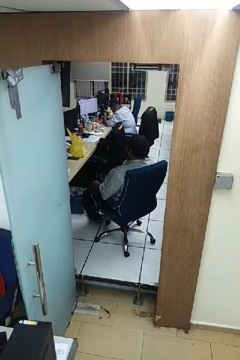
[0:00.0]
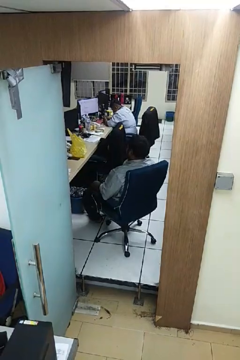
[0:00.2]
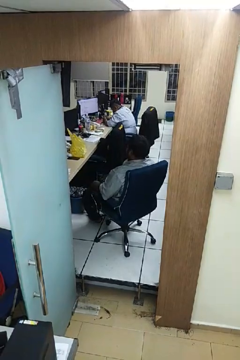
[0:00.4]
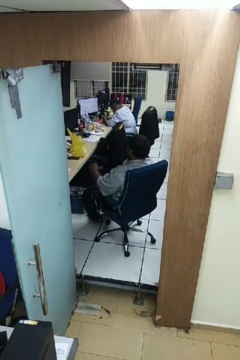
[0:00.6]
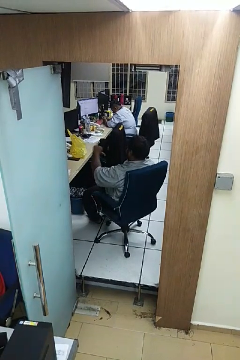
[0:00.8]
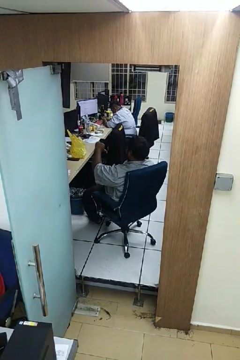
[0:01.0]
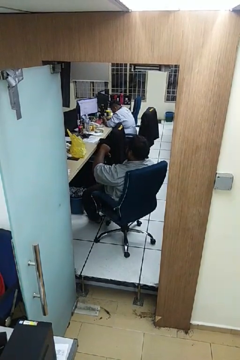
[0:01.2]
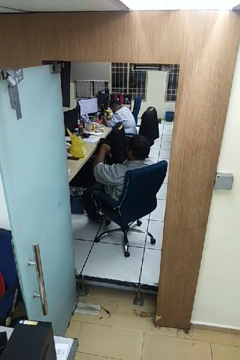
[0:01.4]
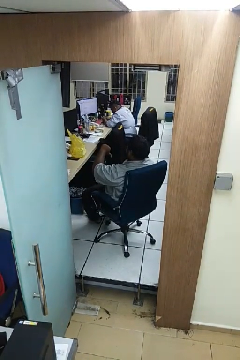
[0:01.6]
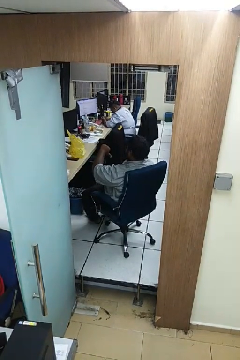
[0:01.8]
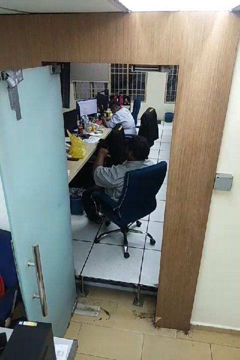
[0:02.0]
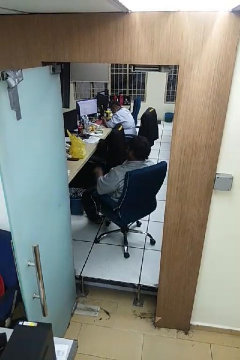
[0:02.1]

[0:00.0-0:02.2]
person gestures thumbs down

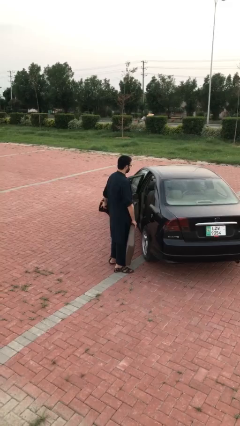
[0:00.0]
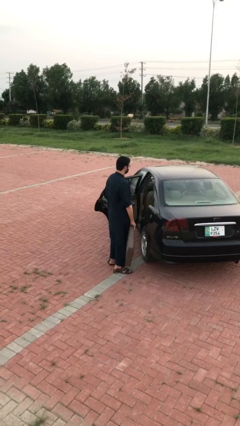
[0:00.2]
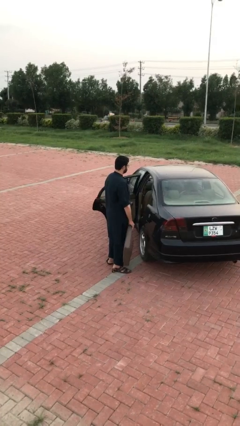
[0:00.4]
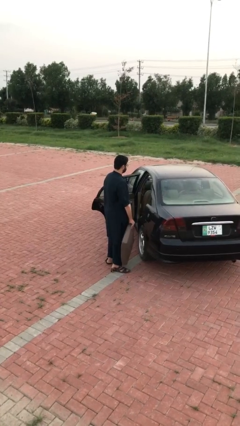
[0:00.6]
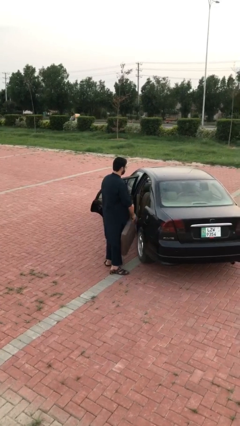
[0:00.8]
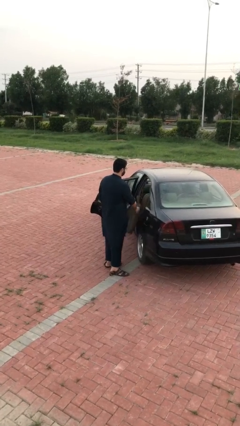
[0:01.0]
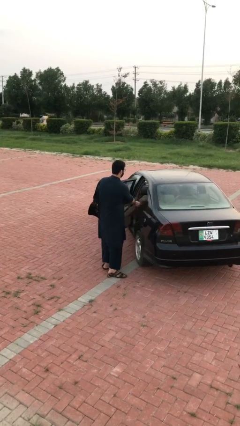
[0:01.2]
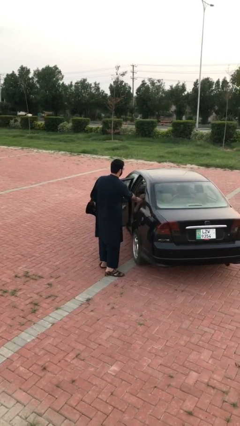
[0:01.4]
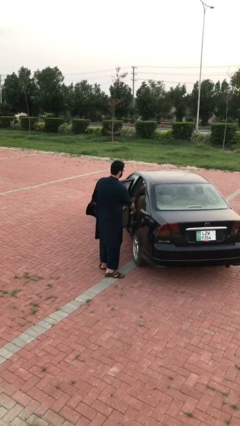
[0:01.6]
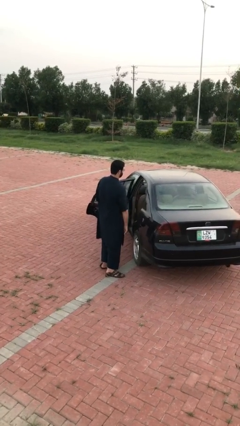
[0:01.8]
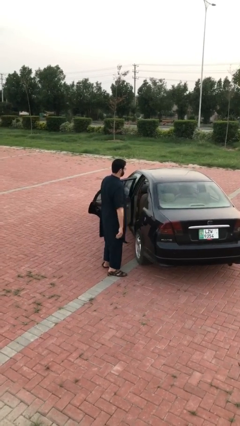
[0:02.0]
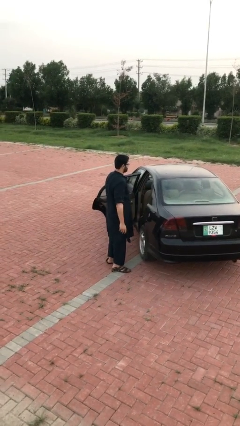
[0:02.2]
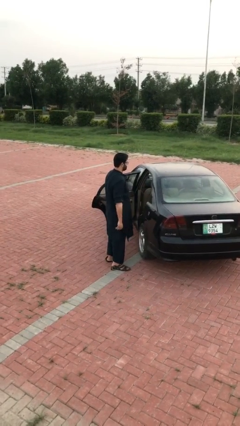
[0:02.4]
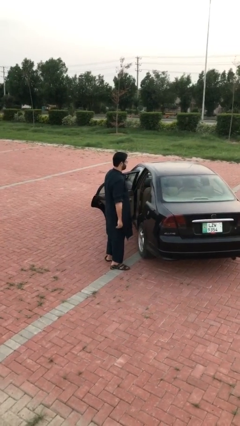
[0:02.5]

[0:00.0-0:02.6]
person loads car

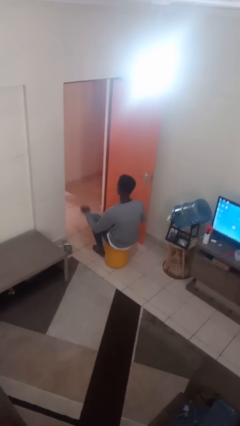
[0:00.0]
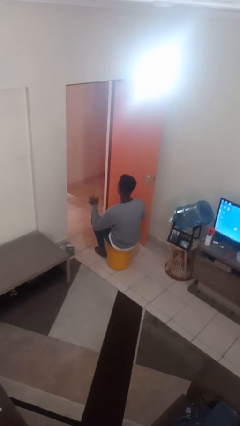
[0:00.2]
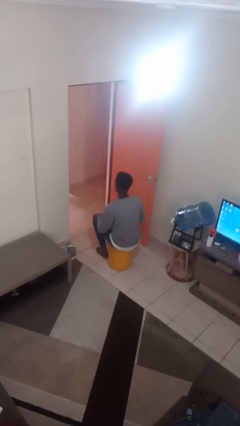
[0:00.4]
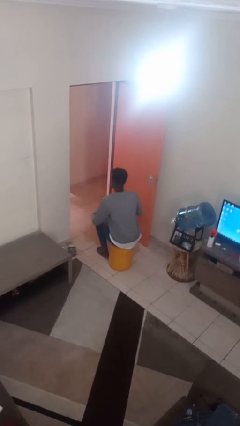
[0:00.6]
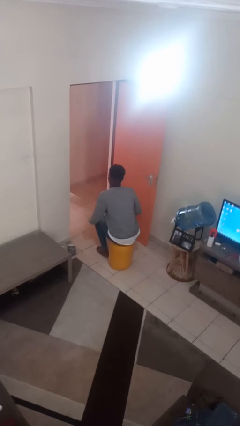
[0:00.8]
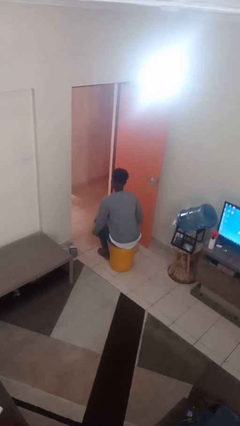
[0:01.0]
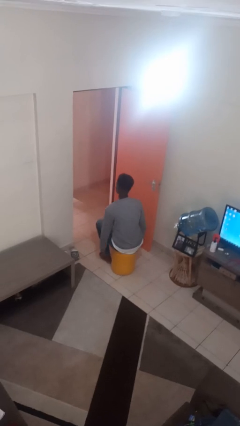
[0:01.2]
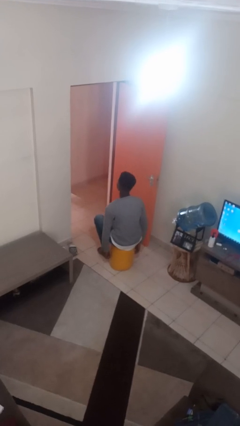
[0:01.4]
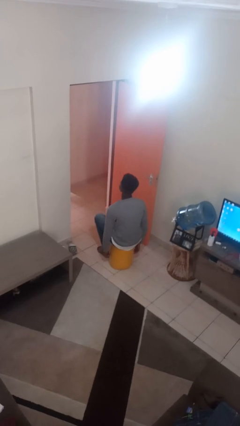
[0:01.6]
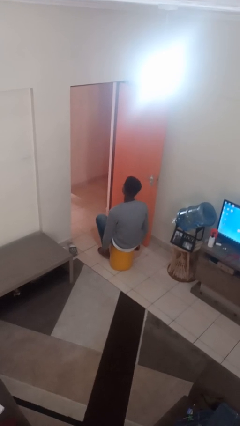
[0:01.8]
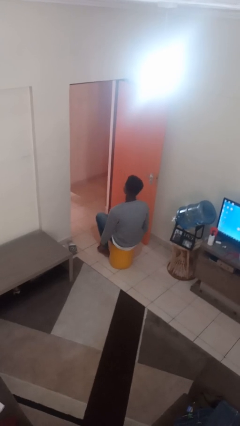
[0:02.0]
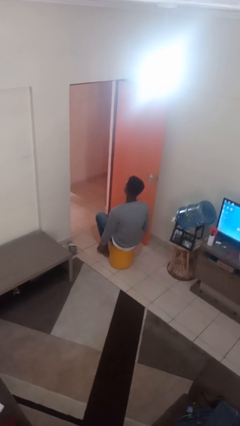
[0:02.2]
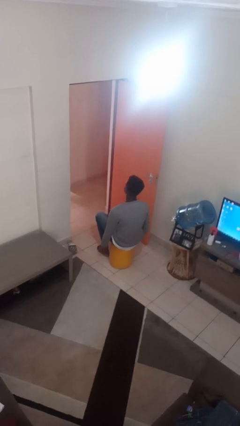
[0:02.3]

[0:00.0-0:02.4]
person slaps hands on thighs

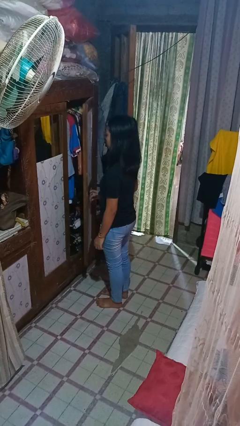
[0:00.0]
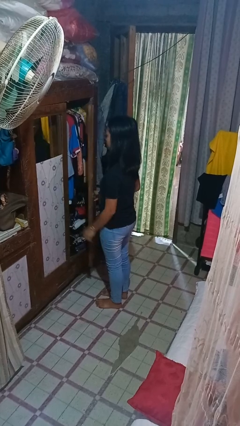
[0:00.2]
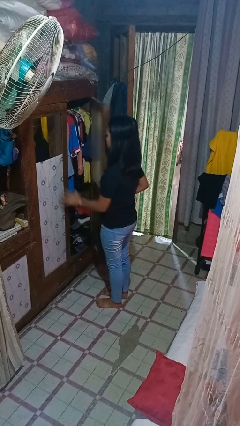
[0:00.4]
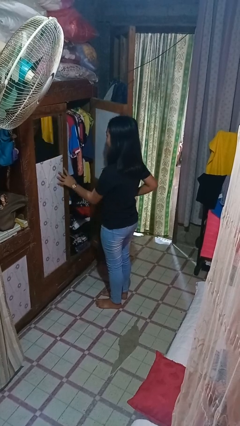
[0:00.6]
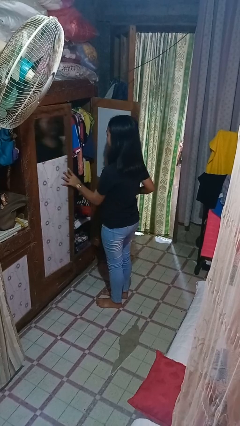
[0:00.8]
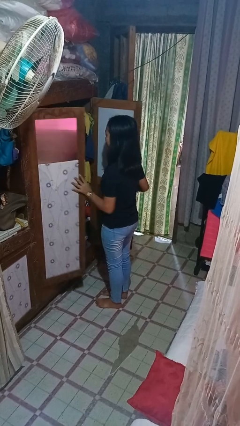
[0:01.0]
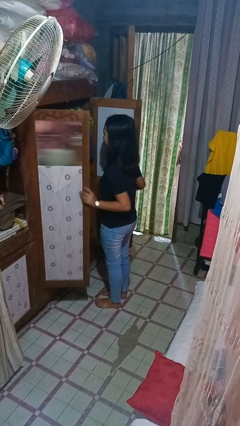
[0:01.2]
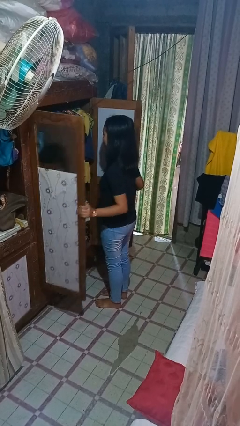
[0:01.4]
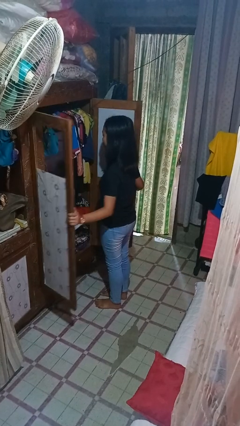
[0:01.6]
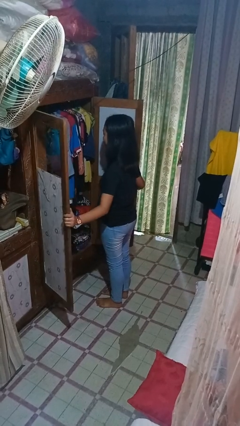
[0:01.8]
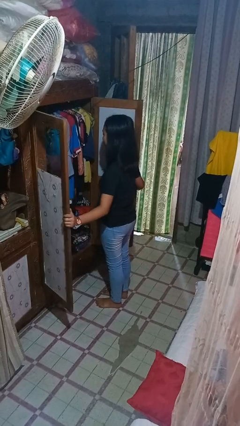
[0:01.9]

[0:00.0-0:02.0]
person opens closet door

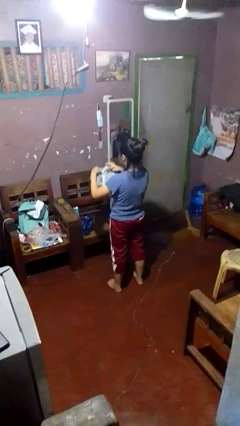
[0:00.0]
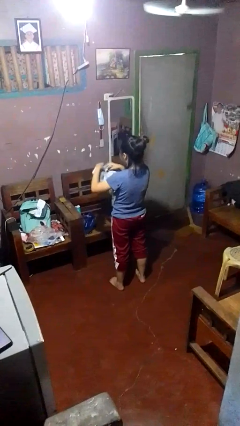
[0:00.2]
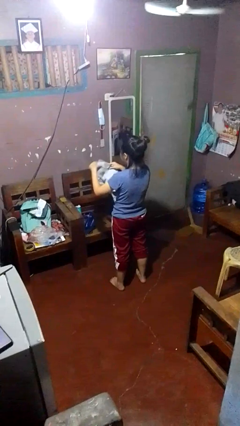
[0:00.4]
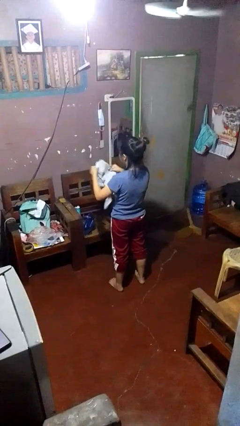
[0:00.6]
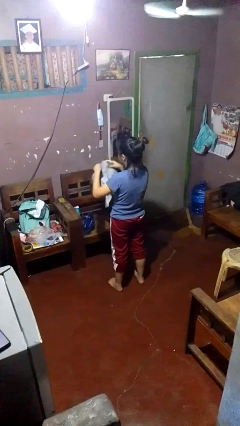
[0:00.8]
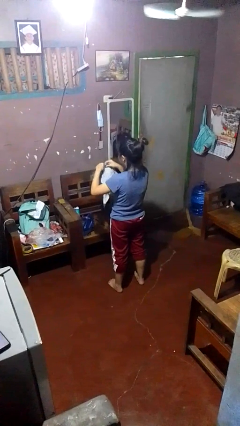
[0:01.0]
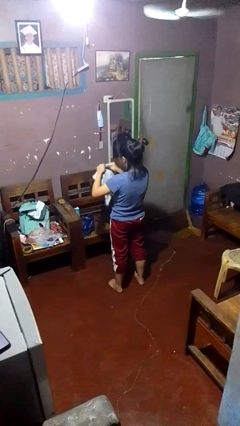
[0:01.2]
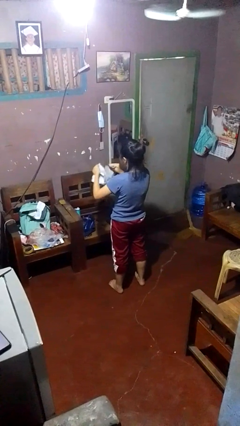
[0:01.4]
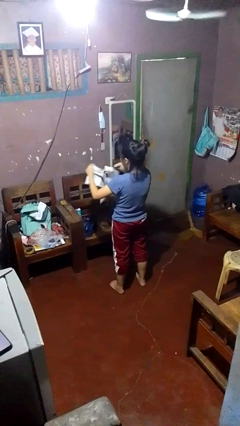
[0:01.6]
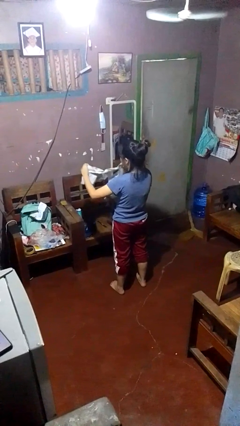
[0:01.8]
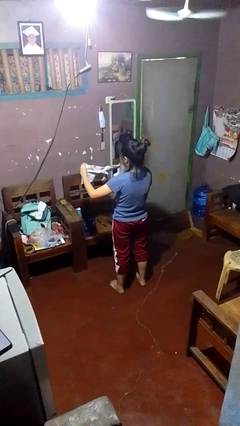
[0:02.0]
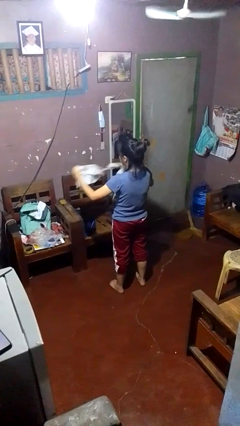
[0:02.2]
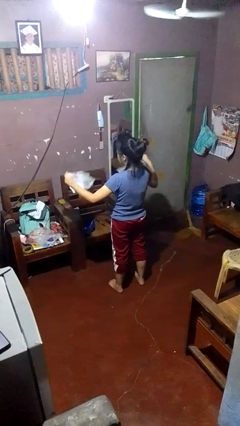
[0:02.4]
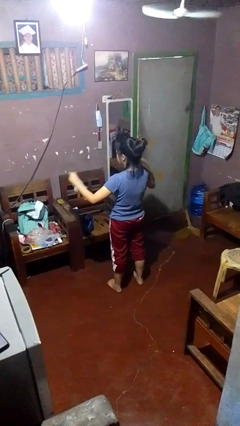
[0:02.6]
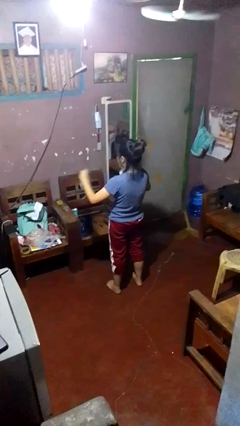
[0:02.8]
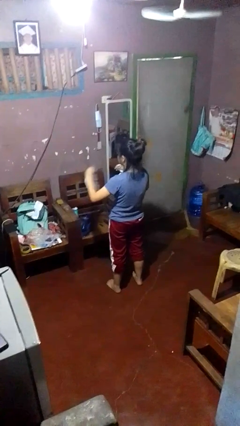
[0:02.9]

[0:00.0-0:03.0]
person tears paper

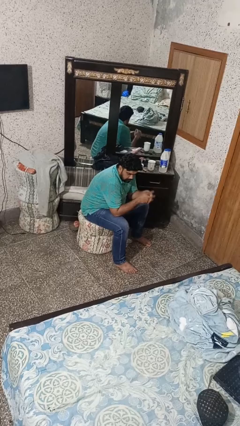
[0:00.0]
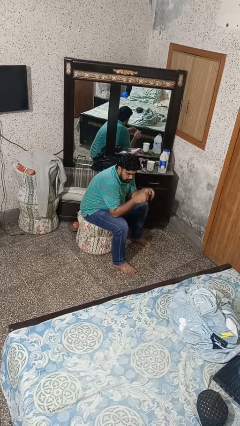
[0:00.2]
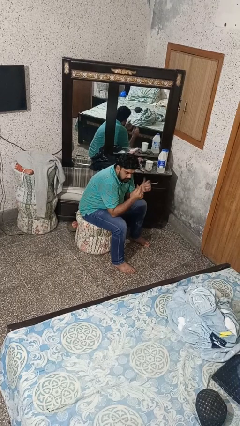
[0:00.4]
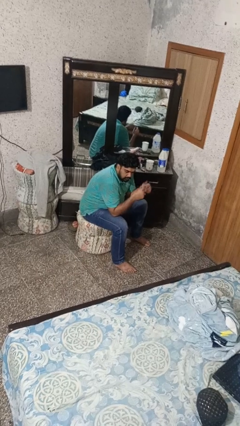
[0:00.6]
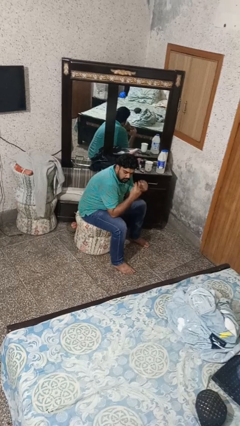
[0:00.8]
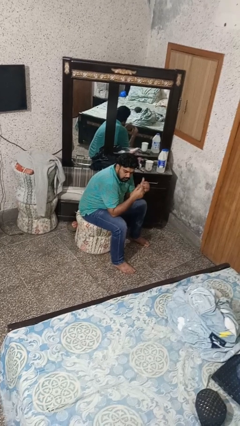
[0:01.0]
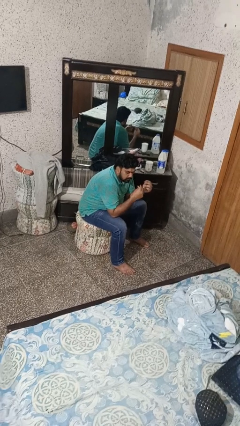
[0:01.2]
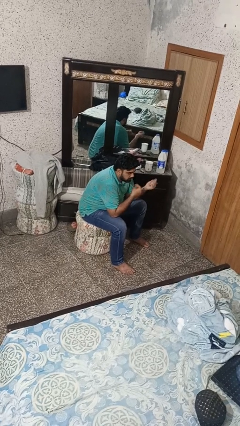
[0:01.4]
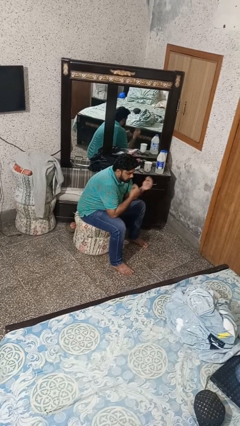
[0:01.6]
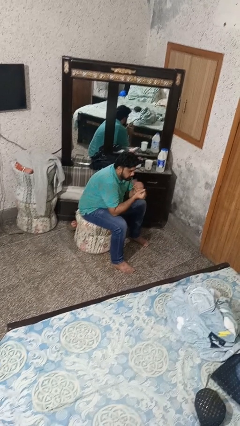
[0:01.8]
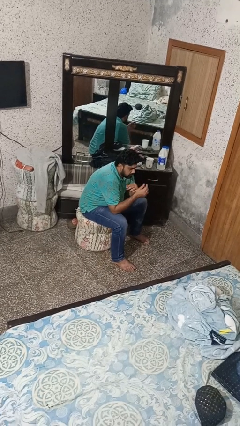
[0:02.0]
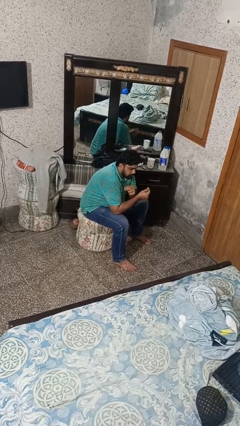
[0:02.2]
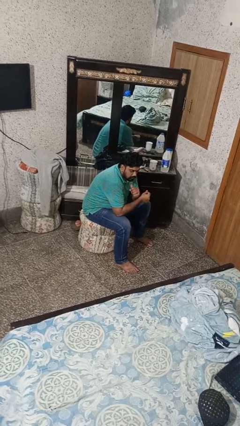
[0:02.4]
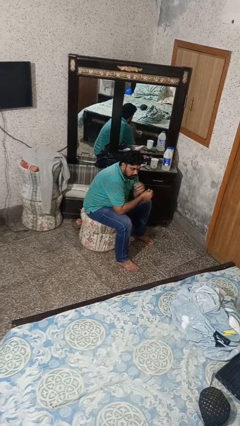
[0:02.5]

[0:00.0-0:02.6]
person snaps fingers

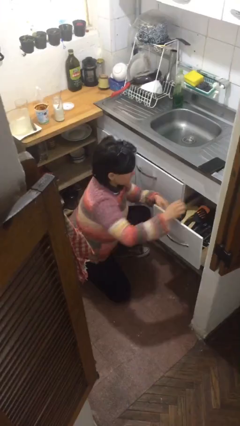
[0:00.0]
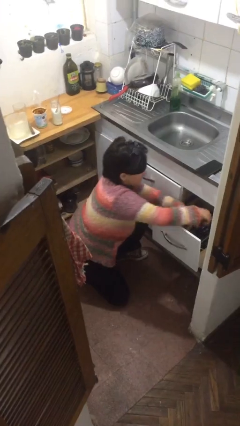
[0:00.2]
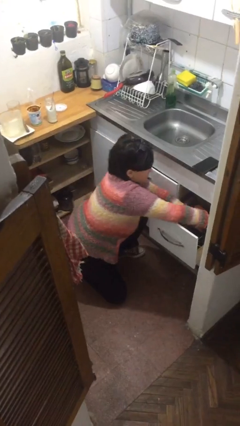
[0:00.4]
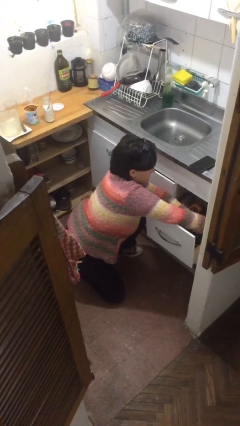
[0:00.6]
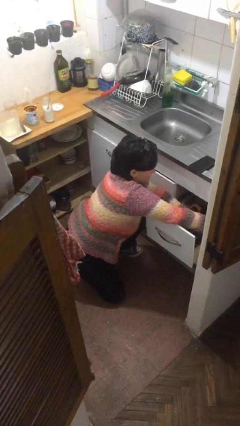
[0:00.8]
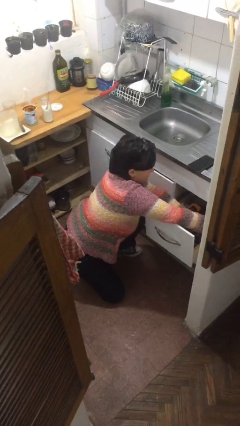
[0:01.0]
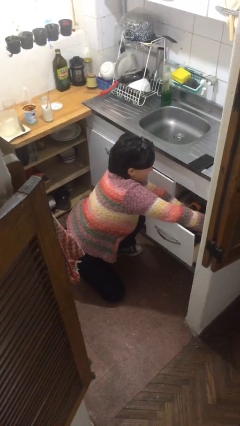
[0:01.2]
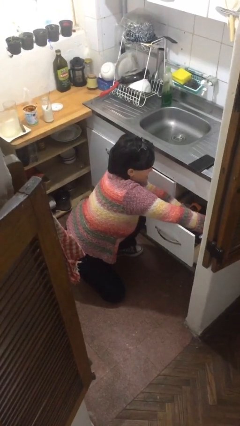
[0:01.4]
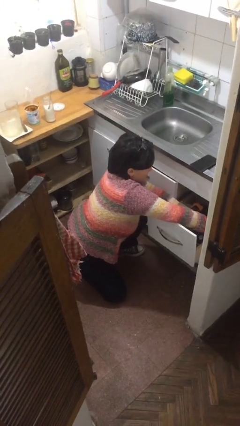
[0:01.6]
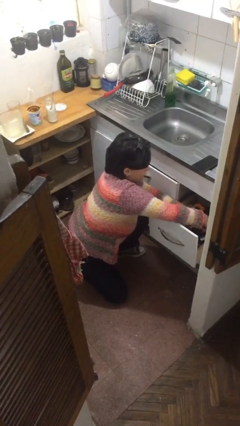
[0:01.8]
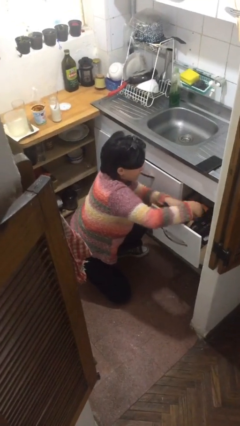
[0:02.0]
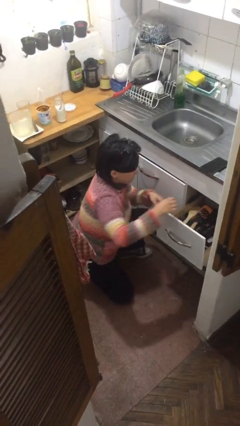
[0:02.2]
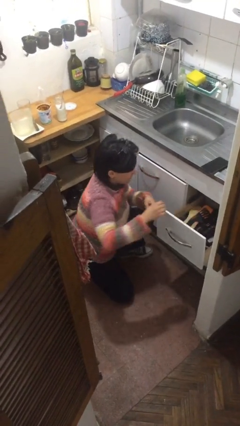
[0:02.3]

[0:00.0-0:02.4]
person searches in kitchen drawer

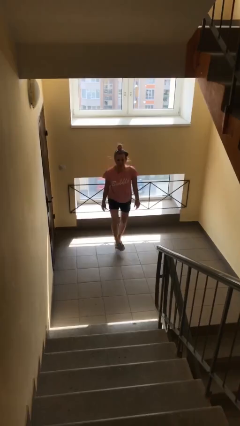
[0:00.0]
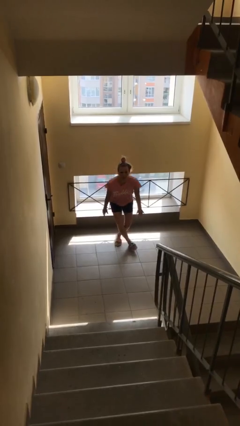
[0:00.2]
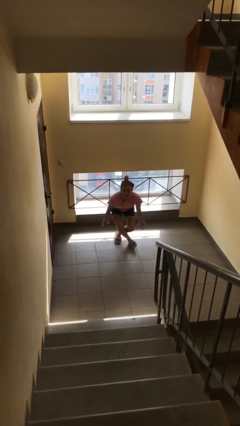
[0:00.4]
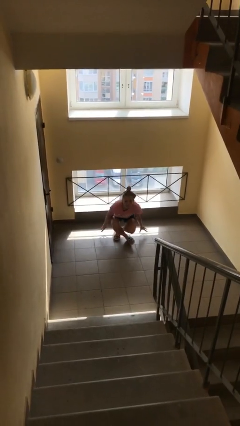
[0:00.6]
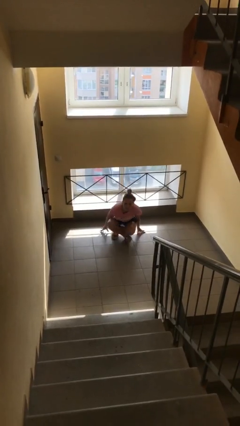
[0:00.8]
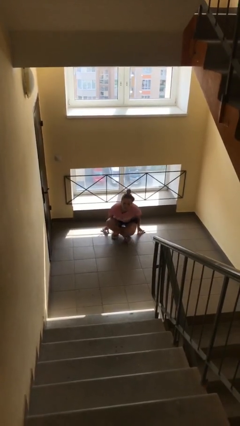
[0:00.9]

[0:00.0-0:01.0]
person sits crisscross
